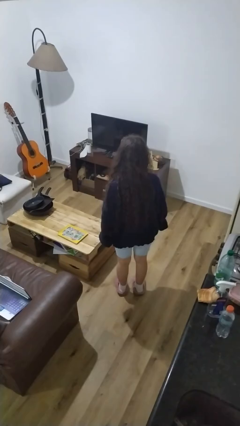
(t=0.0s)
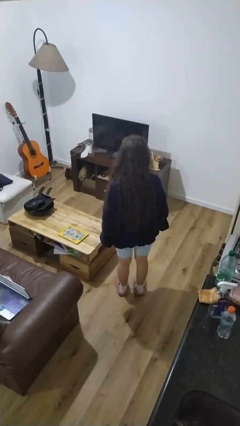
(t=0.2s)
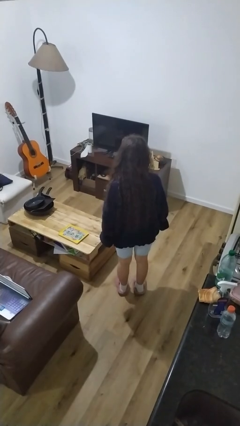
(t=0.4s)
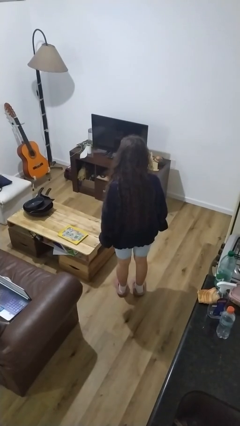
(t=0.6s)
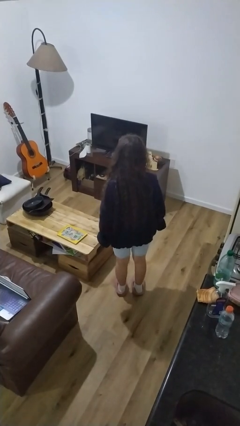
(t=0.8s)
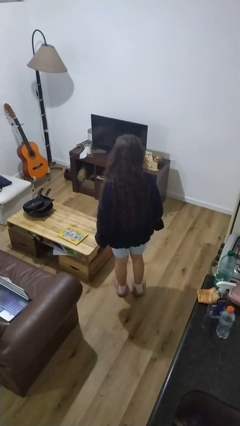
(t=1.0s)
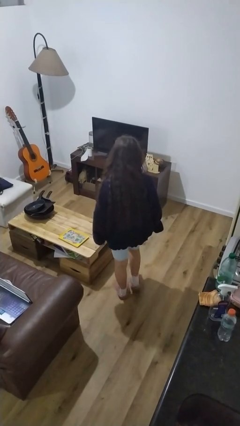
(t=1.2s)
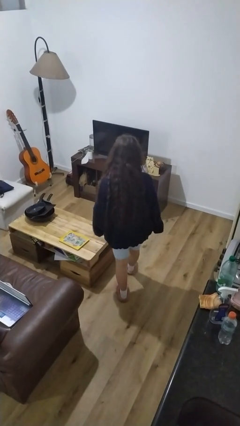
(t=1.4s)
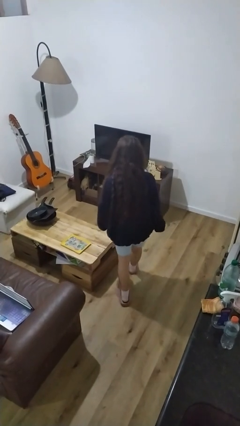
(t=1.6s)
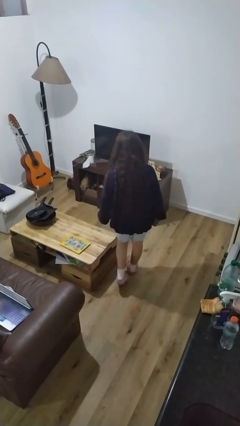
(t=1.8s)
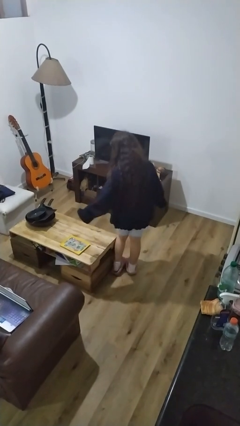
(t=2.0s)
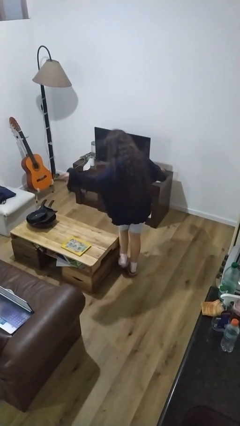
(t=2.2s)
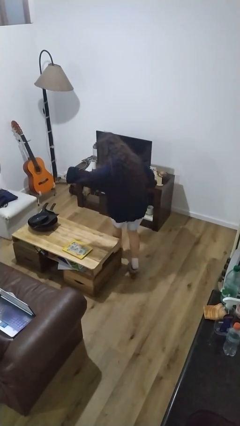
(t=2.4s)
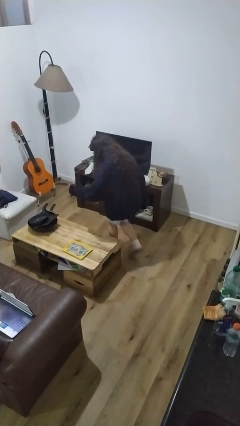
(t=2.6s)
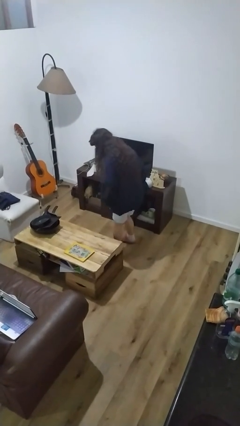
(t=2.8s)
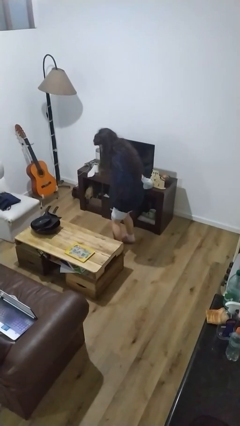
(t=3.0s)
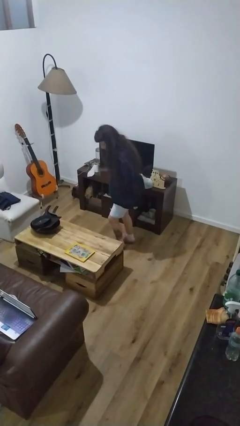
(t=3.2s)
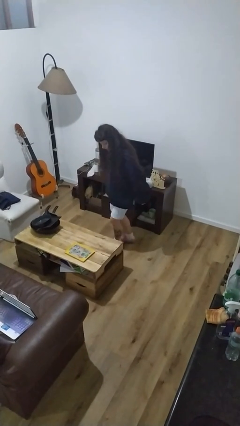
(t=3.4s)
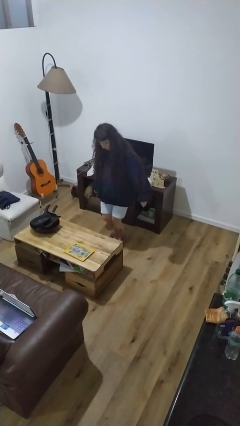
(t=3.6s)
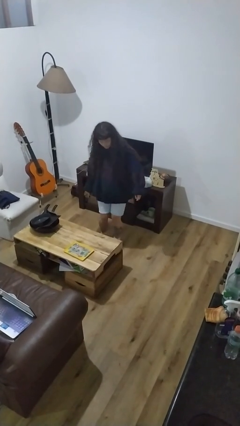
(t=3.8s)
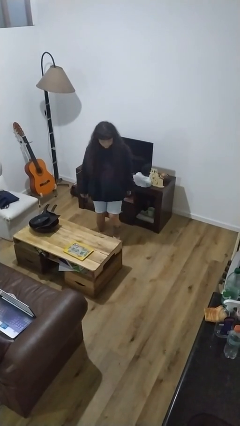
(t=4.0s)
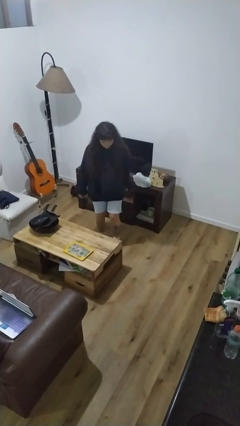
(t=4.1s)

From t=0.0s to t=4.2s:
person bumps into table

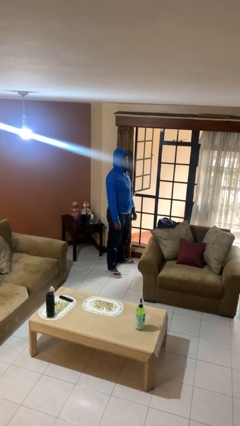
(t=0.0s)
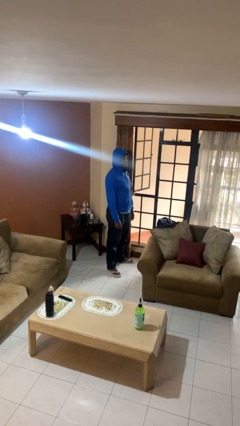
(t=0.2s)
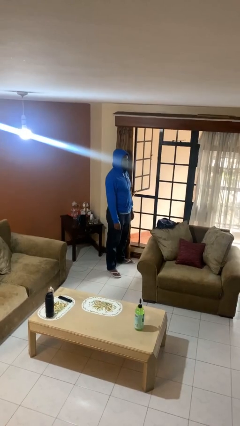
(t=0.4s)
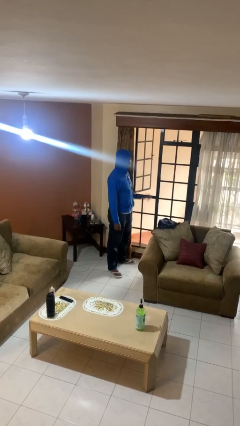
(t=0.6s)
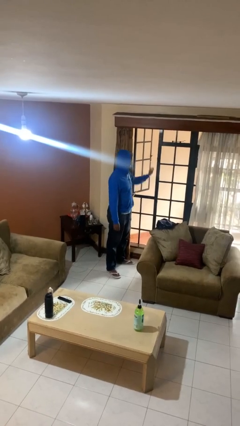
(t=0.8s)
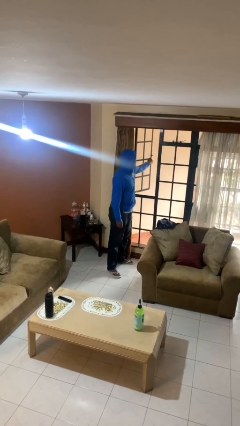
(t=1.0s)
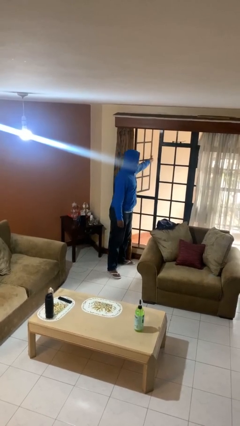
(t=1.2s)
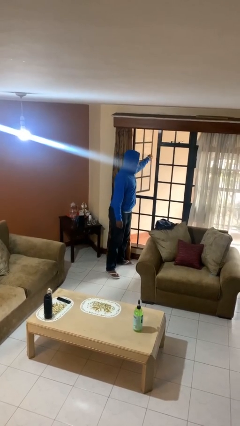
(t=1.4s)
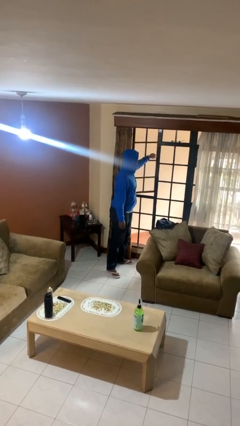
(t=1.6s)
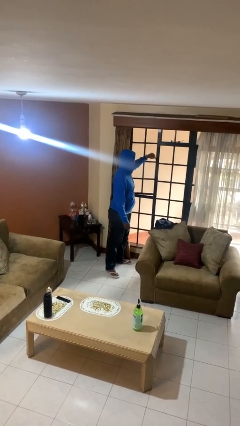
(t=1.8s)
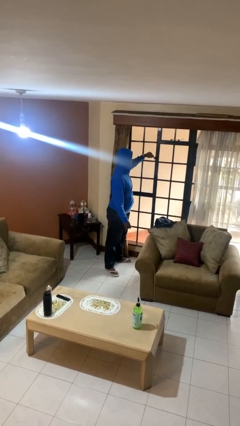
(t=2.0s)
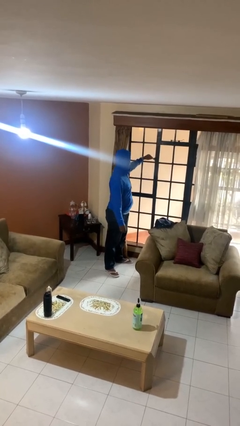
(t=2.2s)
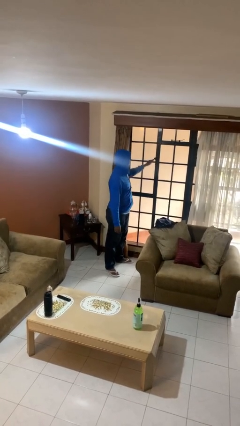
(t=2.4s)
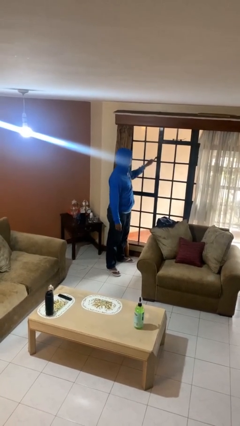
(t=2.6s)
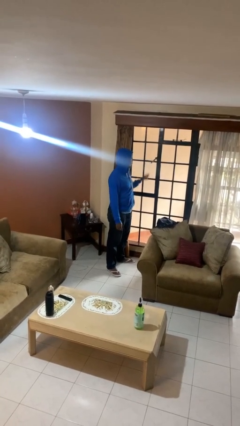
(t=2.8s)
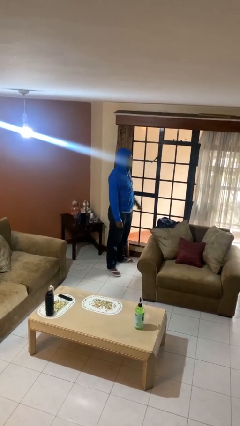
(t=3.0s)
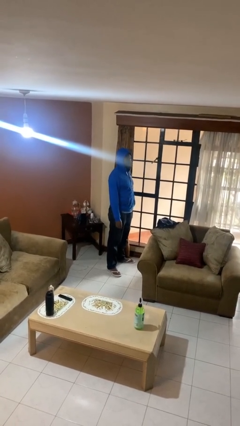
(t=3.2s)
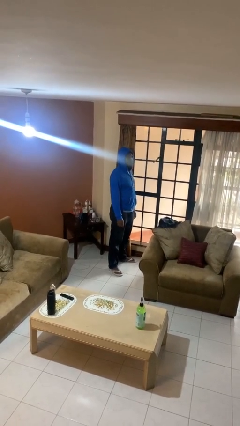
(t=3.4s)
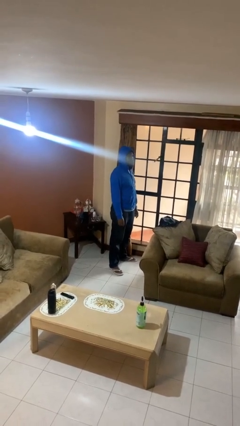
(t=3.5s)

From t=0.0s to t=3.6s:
person closes home window

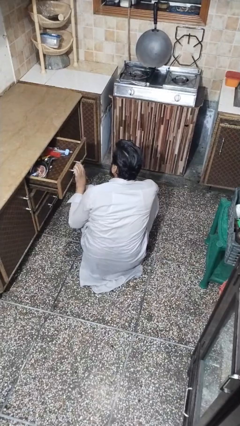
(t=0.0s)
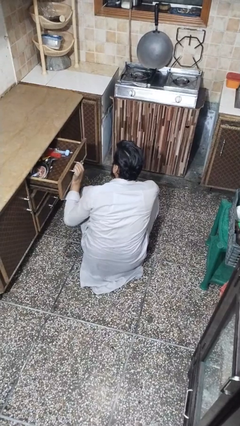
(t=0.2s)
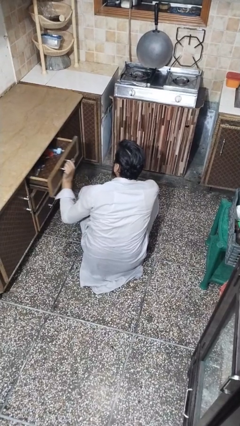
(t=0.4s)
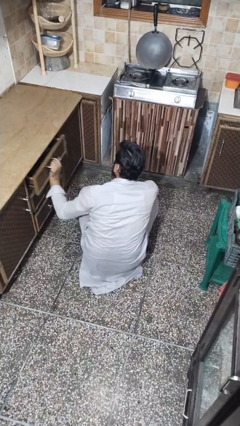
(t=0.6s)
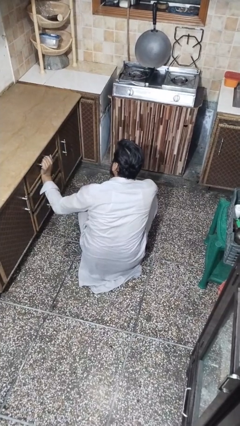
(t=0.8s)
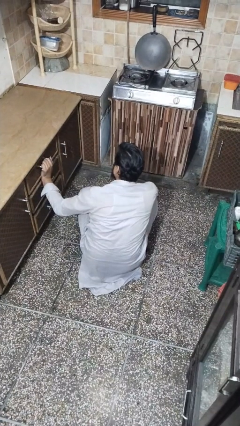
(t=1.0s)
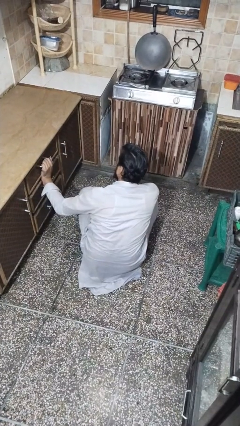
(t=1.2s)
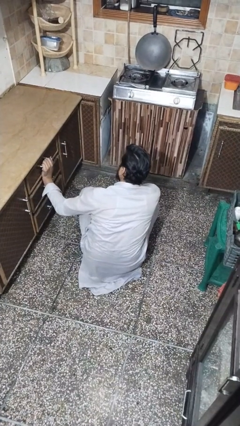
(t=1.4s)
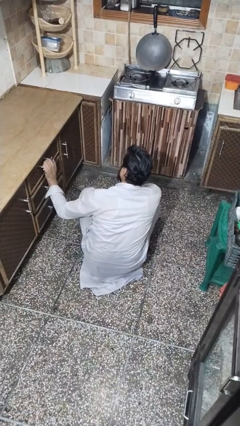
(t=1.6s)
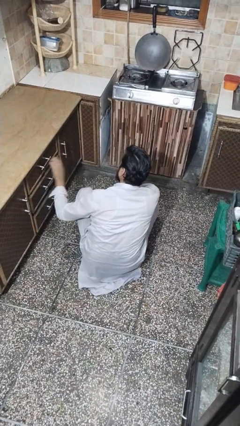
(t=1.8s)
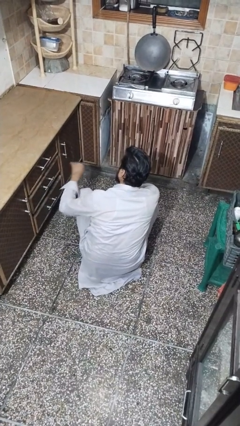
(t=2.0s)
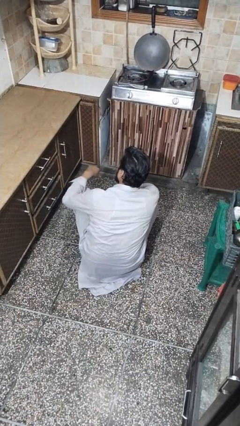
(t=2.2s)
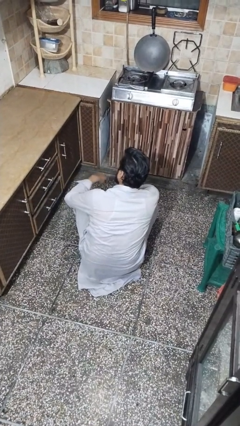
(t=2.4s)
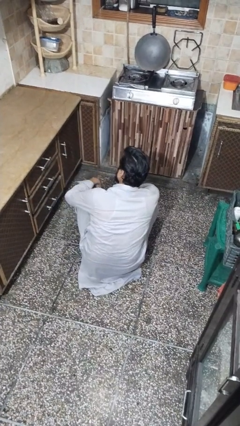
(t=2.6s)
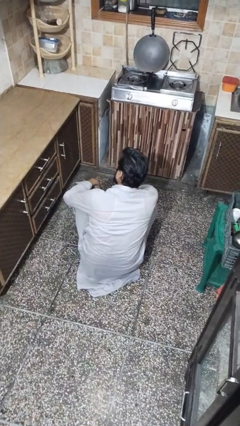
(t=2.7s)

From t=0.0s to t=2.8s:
person closes kitchen drawer

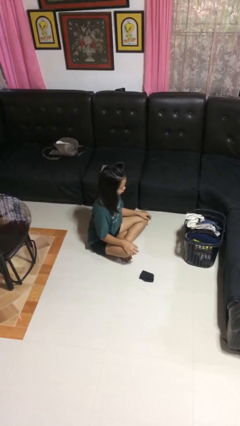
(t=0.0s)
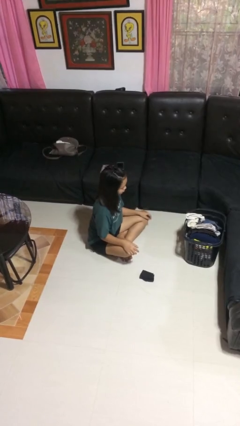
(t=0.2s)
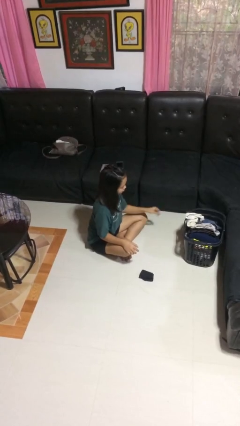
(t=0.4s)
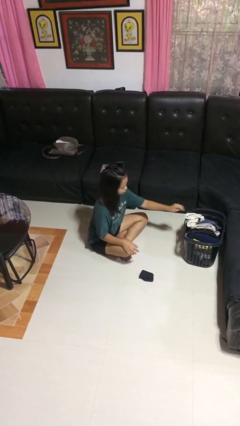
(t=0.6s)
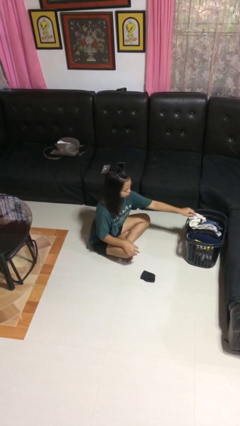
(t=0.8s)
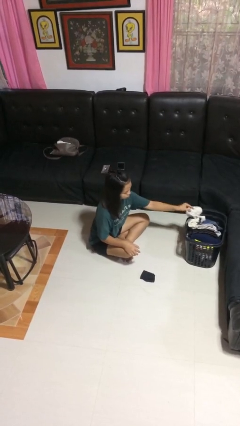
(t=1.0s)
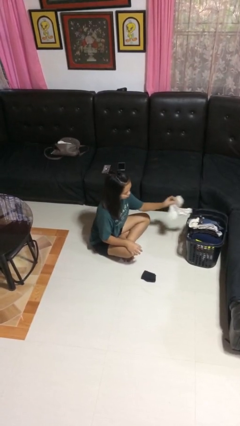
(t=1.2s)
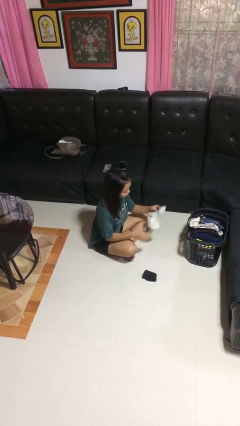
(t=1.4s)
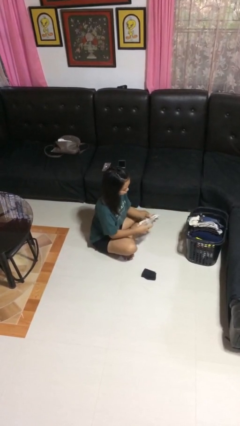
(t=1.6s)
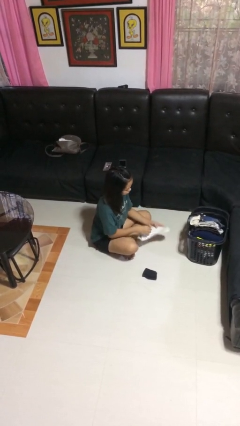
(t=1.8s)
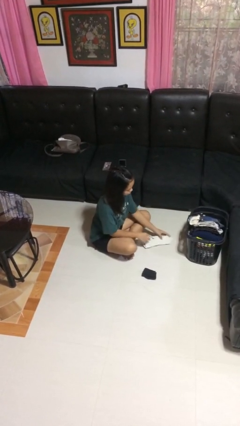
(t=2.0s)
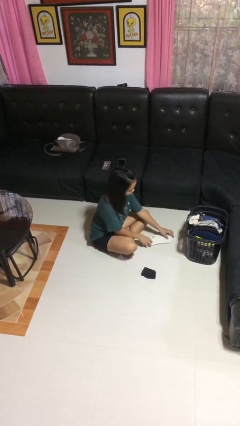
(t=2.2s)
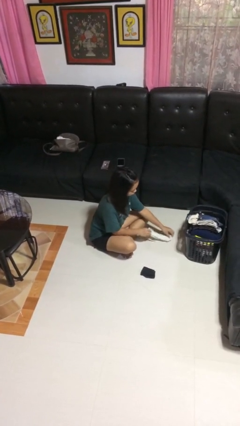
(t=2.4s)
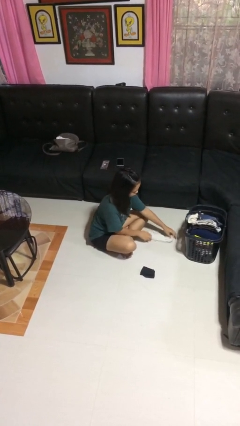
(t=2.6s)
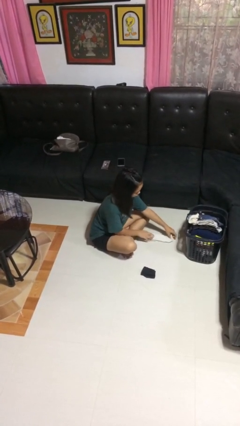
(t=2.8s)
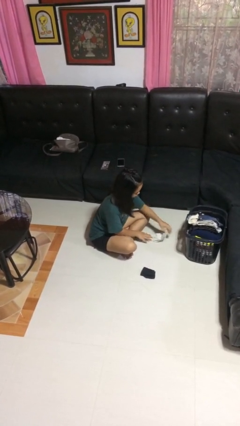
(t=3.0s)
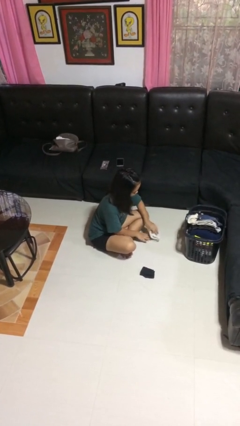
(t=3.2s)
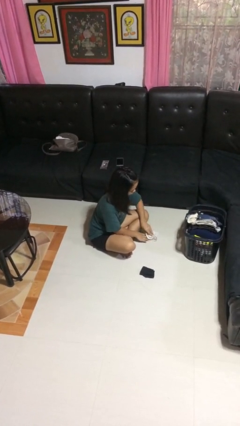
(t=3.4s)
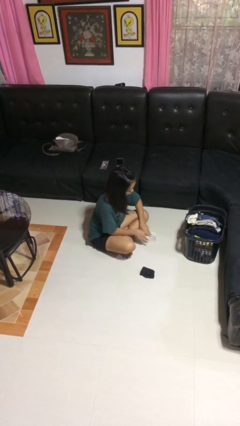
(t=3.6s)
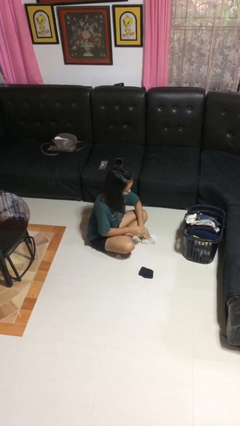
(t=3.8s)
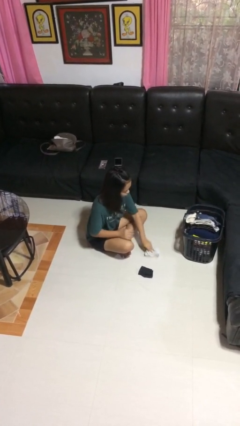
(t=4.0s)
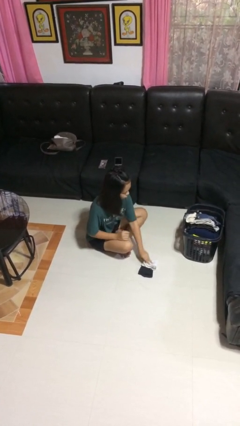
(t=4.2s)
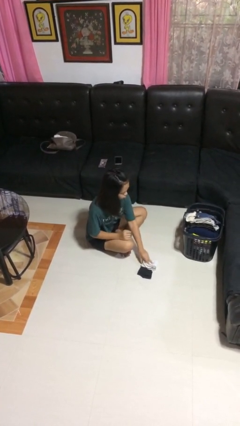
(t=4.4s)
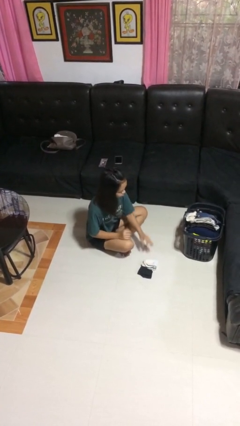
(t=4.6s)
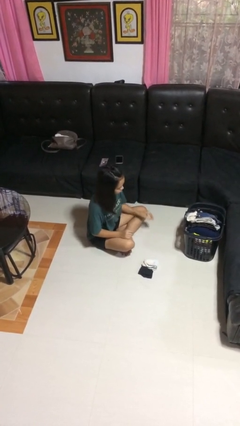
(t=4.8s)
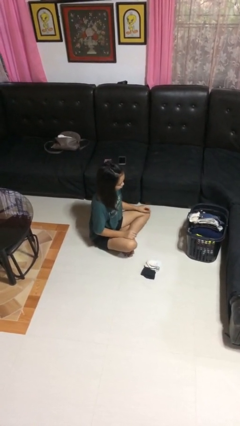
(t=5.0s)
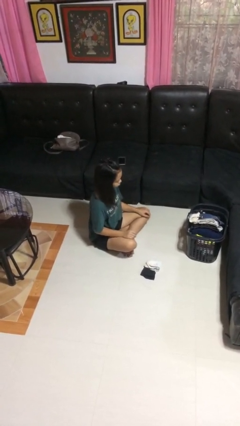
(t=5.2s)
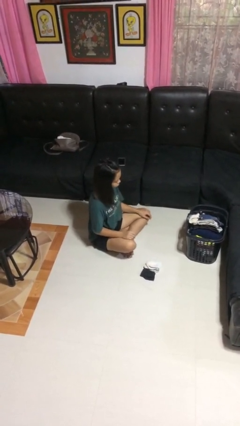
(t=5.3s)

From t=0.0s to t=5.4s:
person folds socks

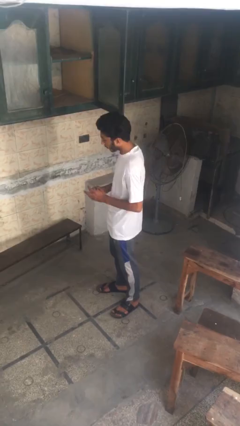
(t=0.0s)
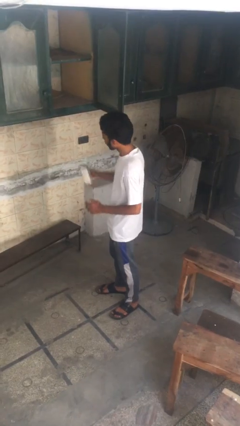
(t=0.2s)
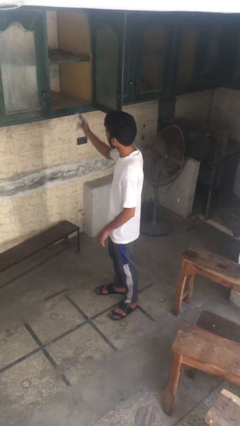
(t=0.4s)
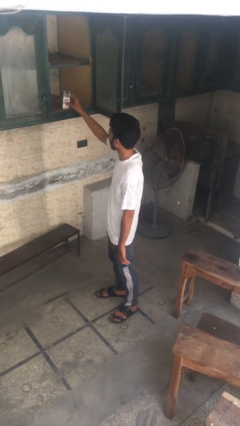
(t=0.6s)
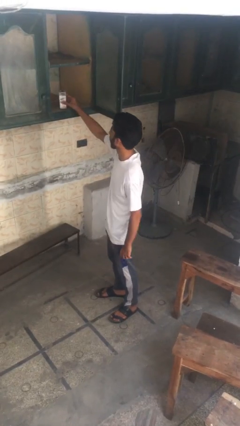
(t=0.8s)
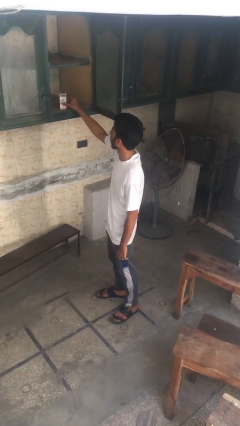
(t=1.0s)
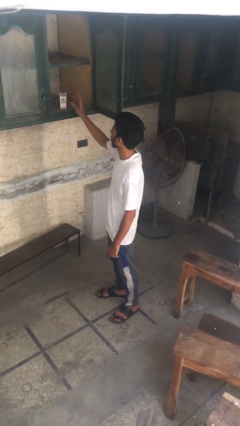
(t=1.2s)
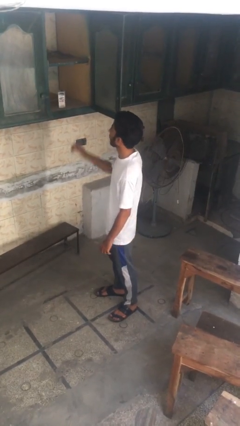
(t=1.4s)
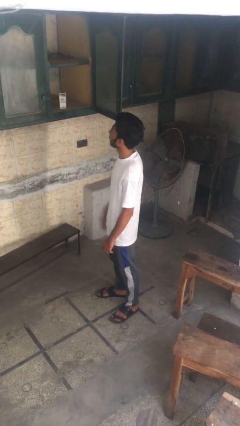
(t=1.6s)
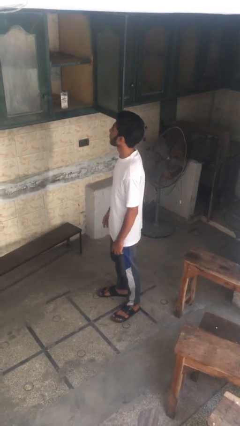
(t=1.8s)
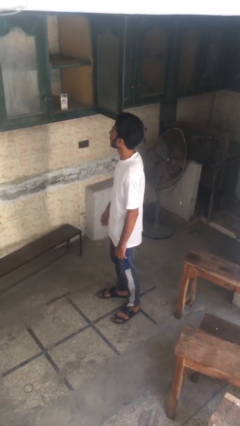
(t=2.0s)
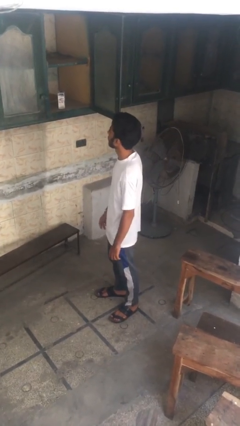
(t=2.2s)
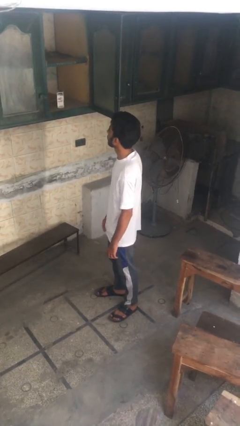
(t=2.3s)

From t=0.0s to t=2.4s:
person puts object in cabinet
